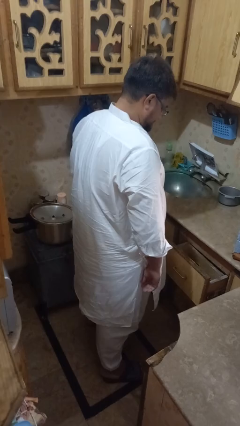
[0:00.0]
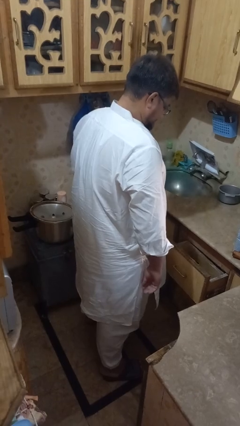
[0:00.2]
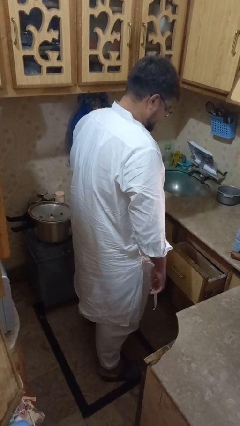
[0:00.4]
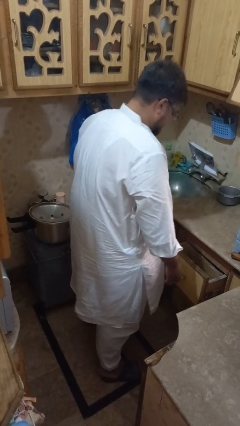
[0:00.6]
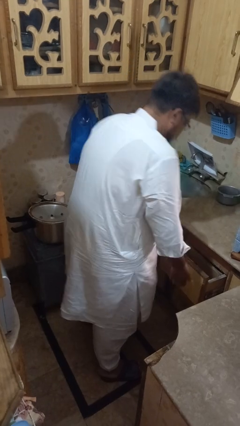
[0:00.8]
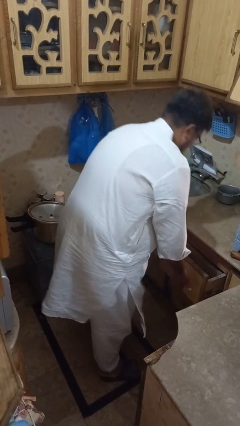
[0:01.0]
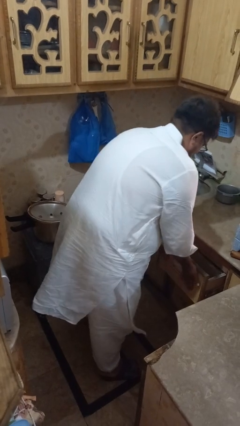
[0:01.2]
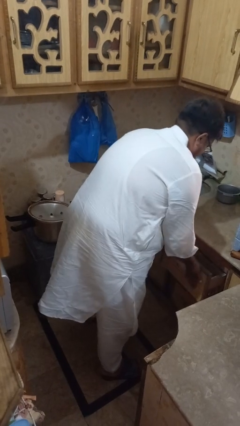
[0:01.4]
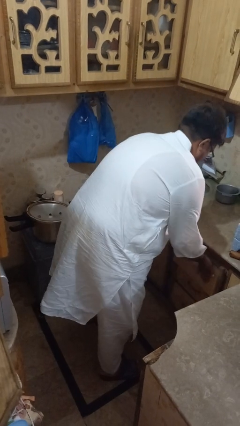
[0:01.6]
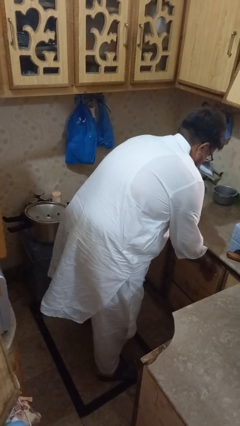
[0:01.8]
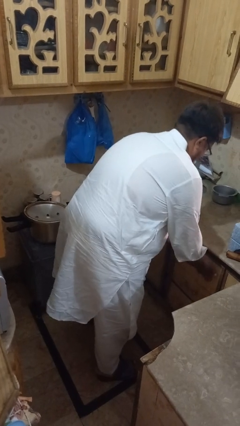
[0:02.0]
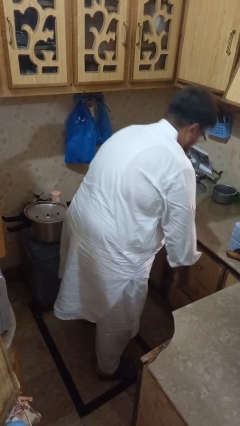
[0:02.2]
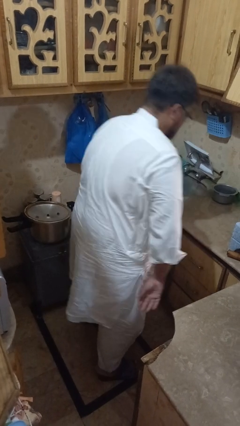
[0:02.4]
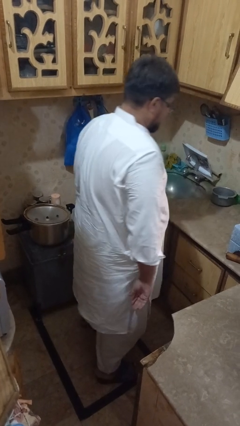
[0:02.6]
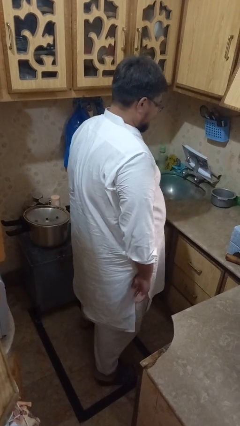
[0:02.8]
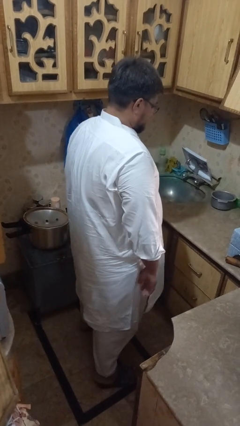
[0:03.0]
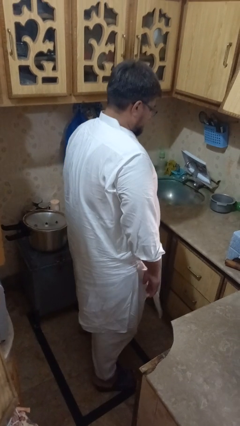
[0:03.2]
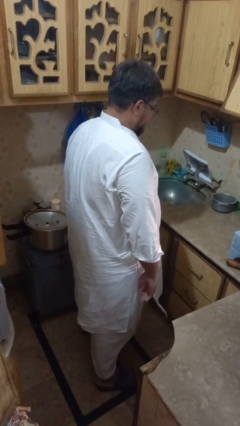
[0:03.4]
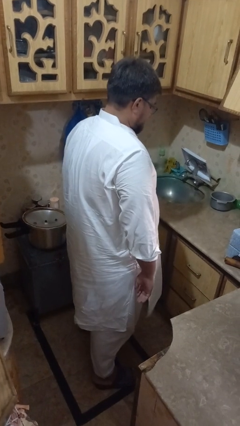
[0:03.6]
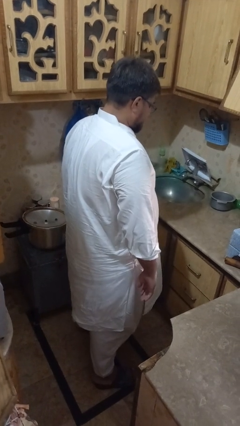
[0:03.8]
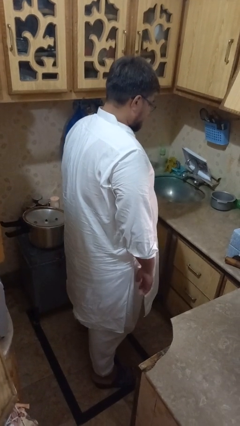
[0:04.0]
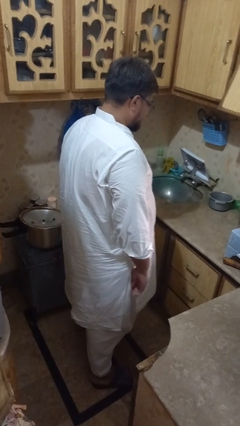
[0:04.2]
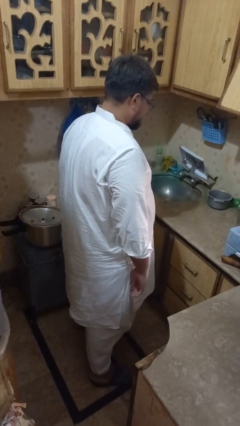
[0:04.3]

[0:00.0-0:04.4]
person closes kitchen drawer

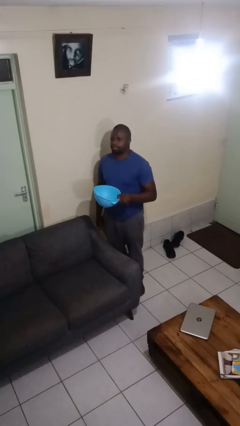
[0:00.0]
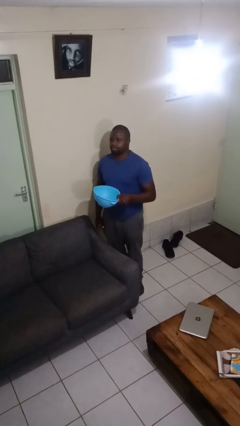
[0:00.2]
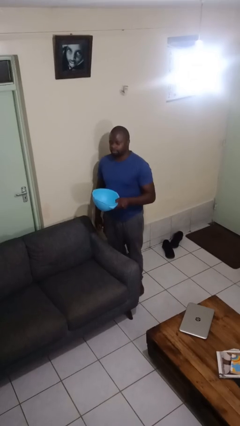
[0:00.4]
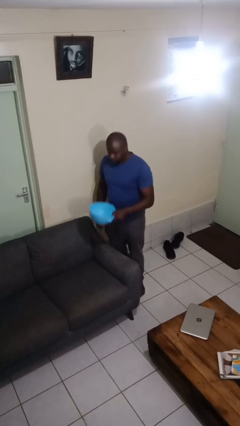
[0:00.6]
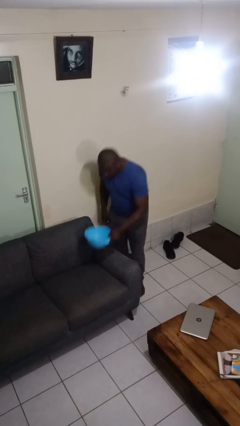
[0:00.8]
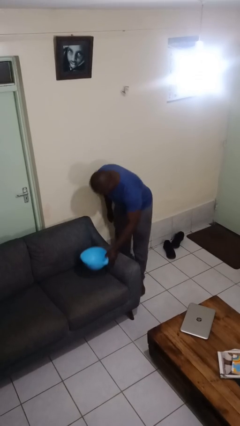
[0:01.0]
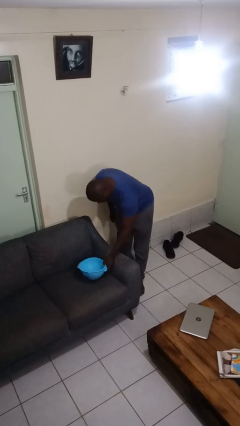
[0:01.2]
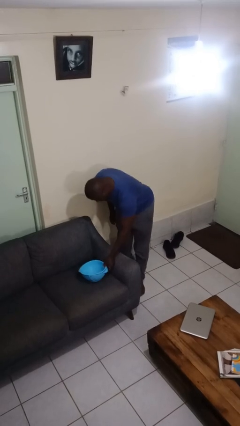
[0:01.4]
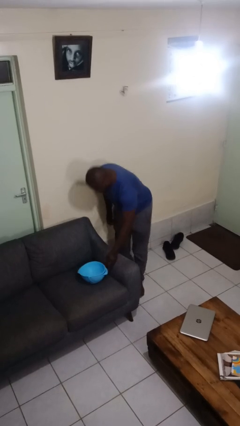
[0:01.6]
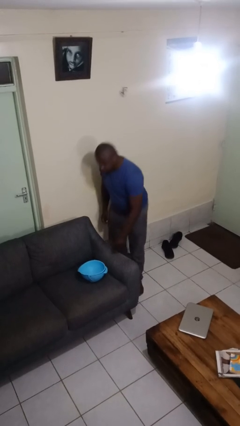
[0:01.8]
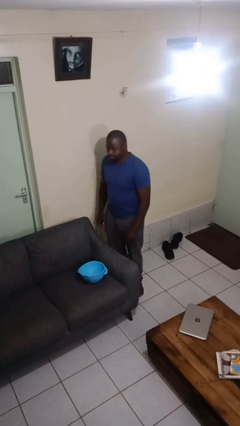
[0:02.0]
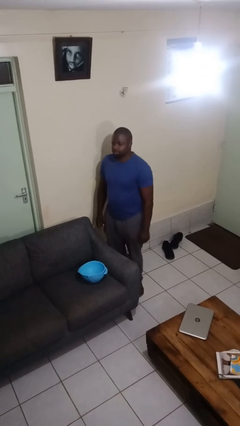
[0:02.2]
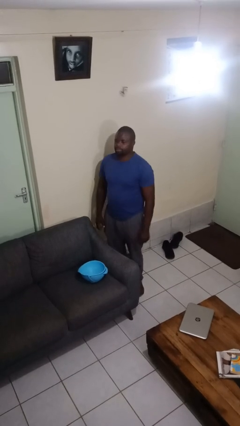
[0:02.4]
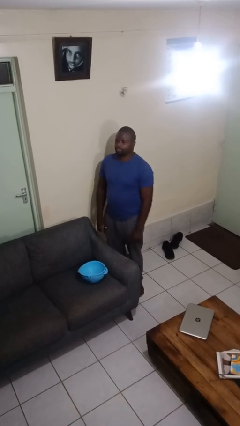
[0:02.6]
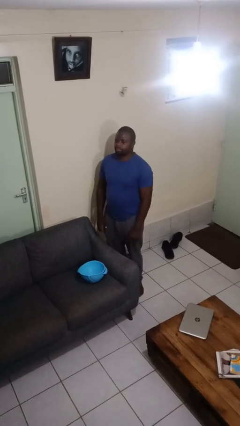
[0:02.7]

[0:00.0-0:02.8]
person puts down object on couch

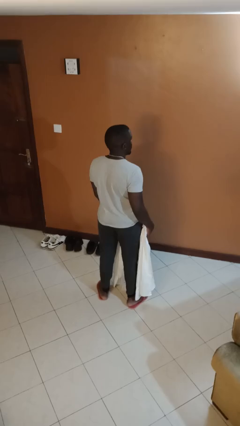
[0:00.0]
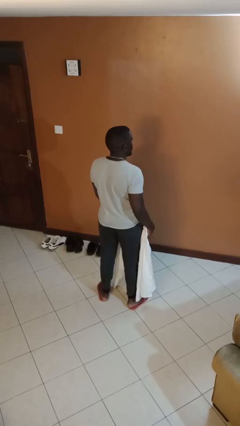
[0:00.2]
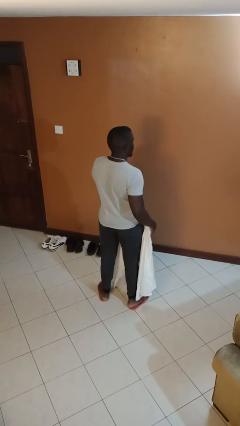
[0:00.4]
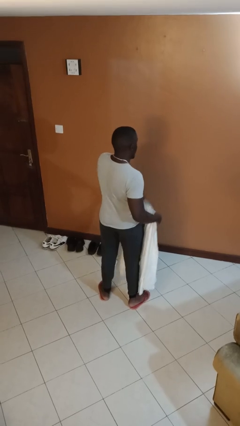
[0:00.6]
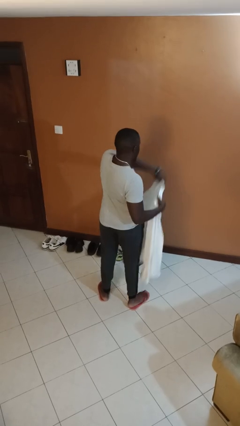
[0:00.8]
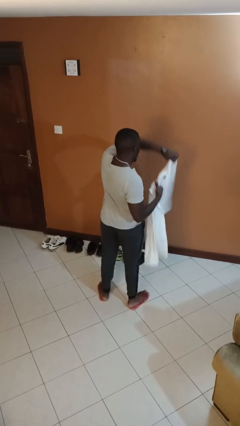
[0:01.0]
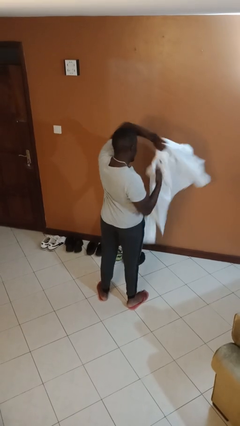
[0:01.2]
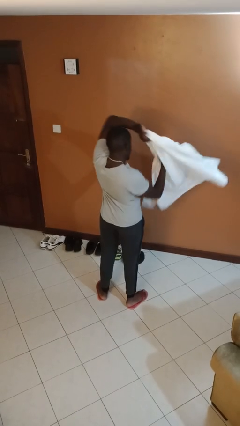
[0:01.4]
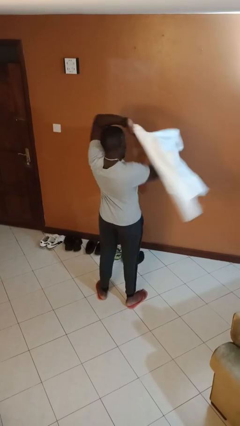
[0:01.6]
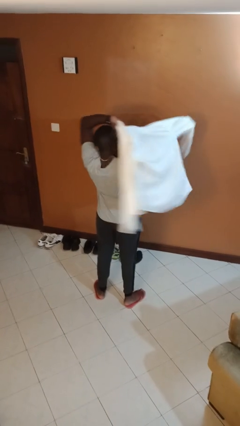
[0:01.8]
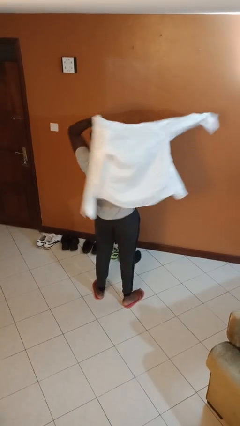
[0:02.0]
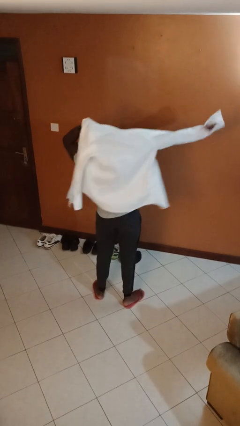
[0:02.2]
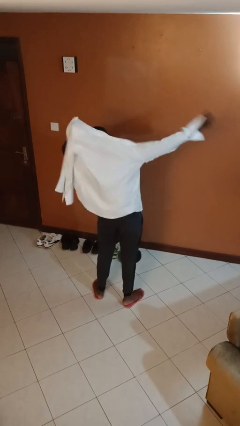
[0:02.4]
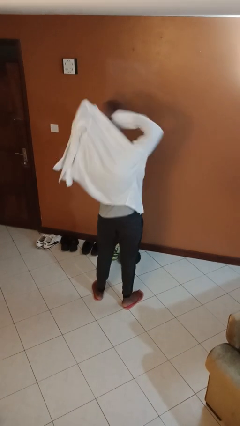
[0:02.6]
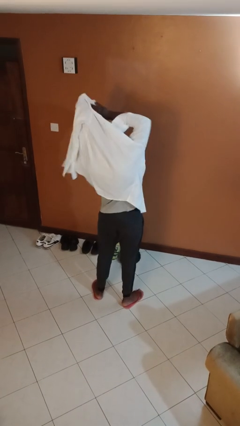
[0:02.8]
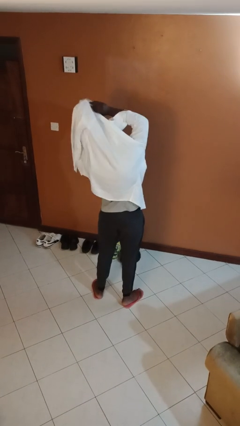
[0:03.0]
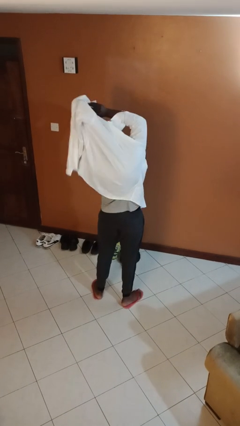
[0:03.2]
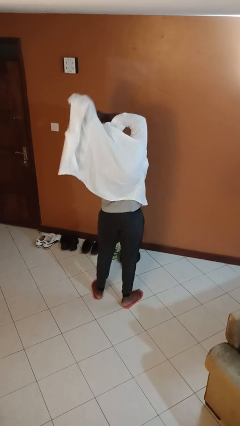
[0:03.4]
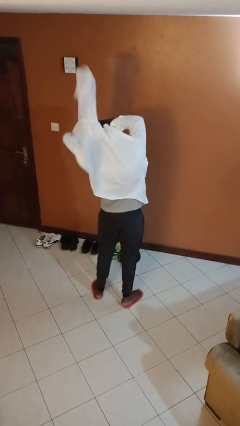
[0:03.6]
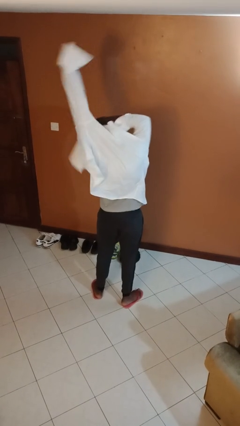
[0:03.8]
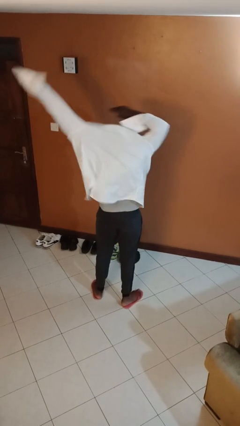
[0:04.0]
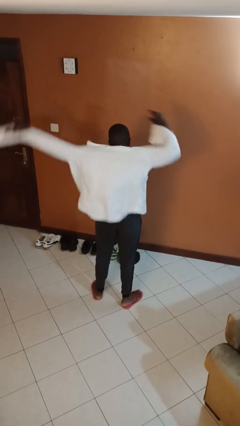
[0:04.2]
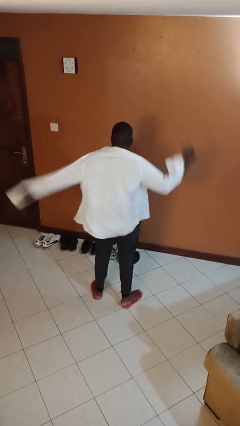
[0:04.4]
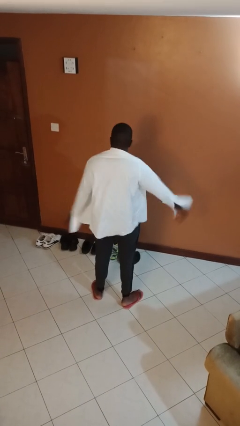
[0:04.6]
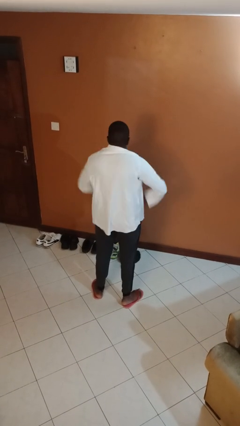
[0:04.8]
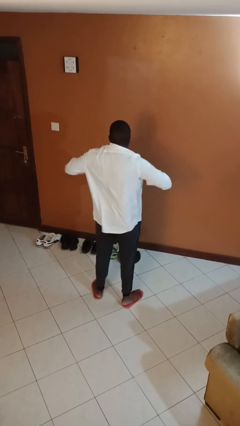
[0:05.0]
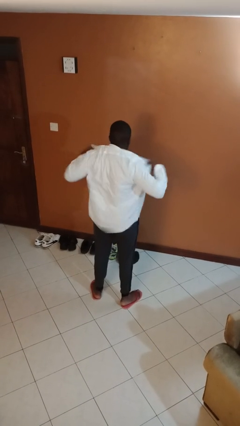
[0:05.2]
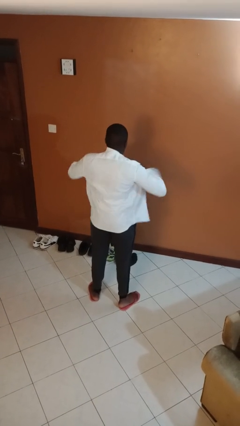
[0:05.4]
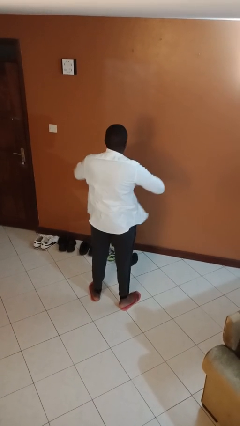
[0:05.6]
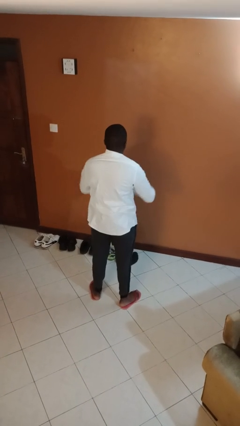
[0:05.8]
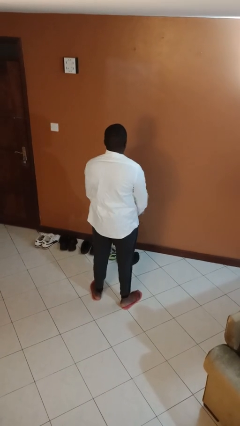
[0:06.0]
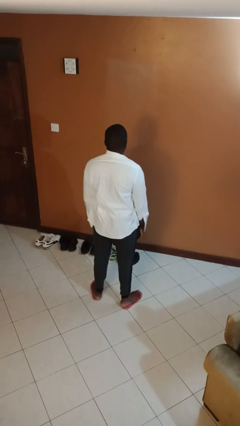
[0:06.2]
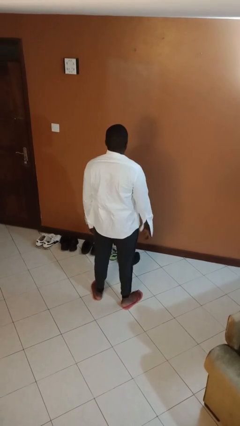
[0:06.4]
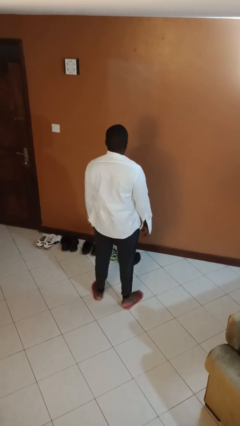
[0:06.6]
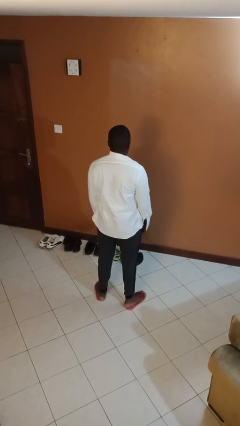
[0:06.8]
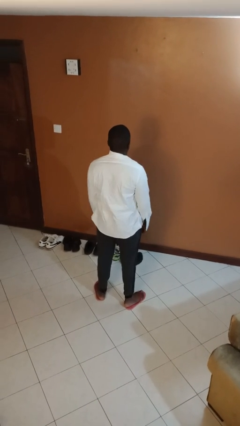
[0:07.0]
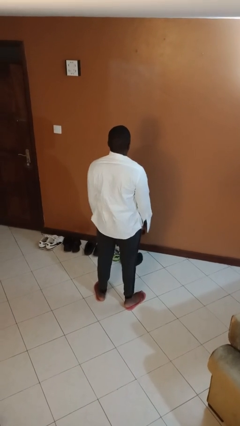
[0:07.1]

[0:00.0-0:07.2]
person puts on shirt

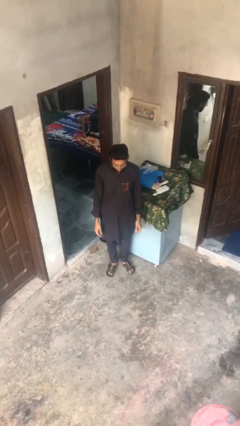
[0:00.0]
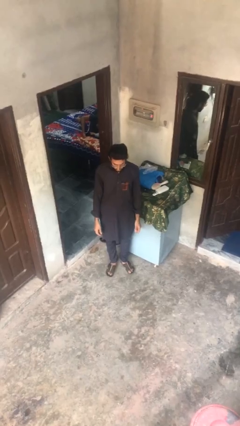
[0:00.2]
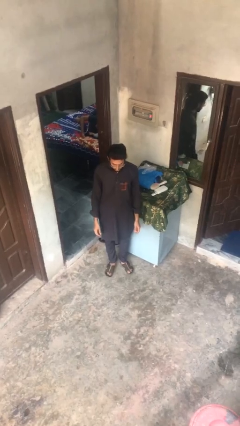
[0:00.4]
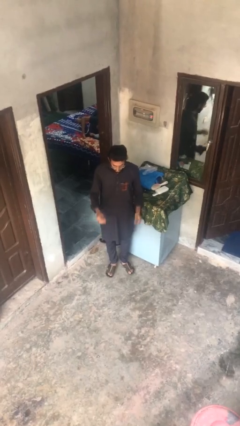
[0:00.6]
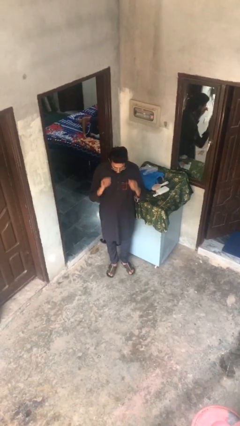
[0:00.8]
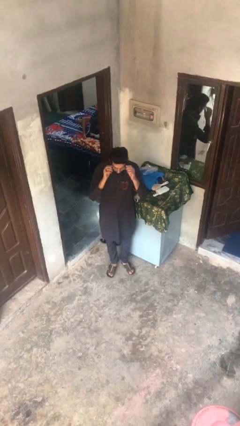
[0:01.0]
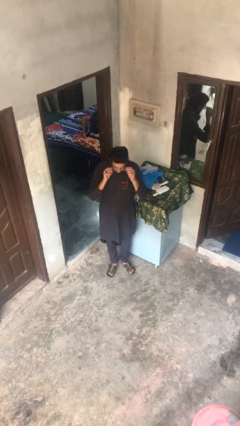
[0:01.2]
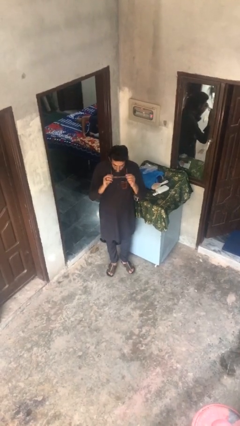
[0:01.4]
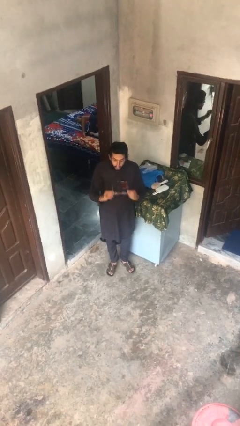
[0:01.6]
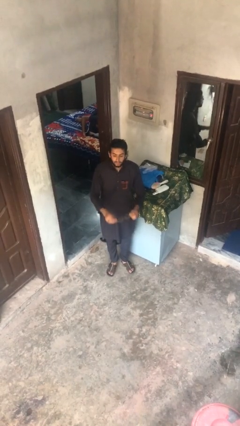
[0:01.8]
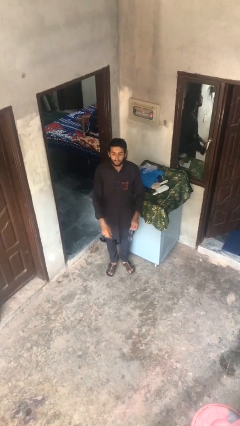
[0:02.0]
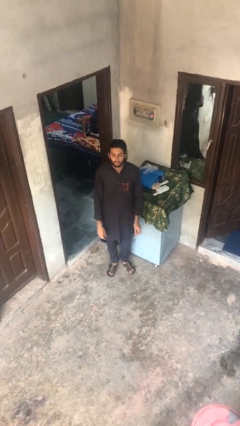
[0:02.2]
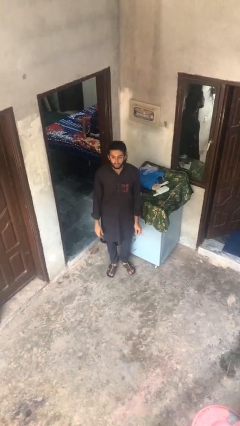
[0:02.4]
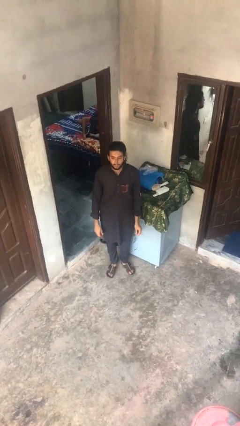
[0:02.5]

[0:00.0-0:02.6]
person takes off glasses

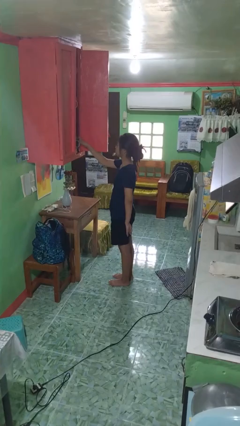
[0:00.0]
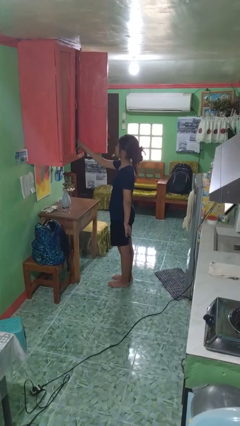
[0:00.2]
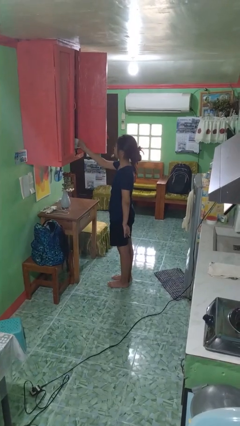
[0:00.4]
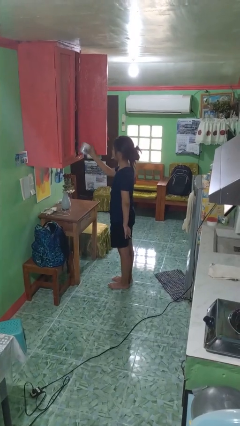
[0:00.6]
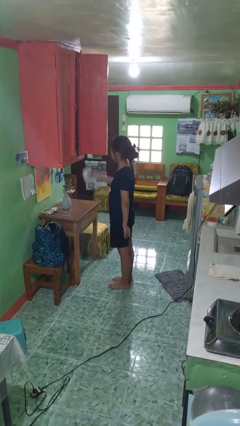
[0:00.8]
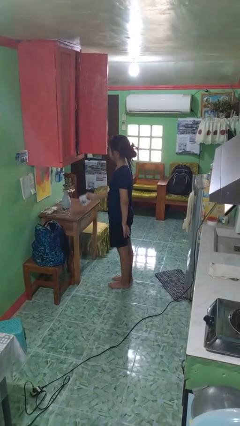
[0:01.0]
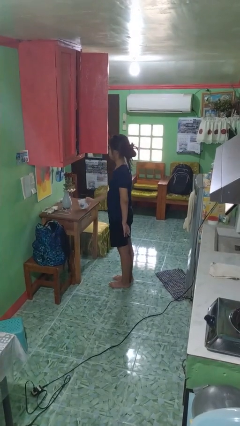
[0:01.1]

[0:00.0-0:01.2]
person takes object from cabinet
